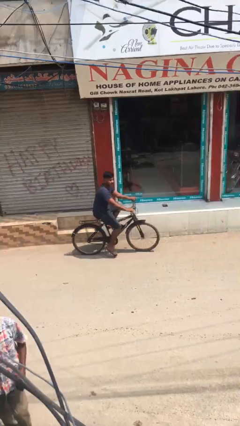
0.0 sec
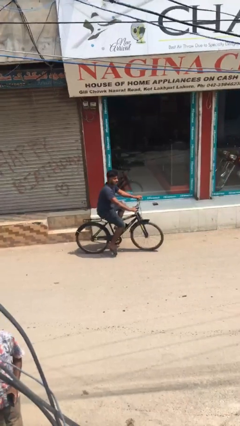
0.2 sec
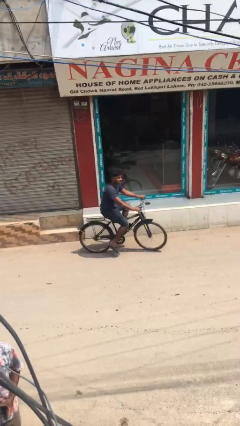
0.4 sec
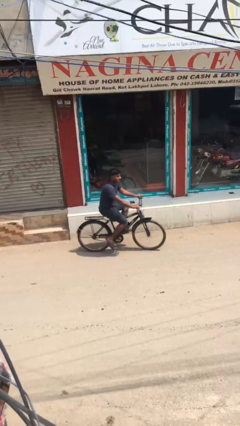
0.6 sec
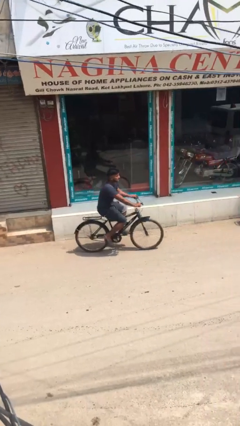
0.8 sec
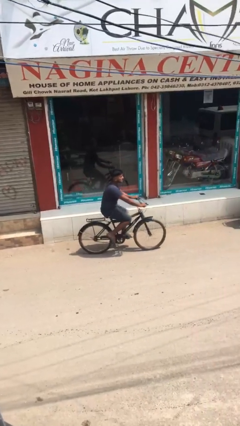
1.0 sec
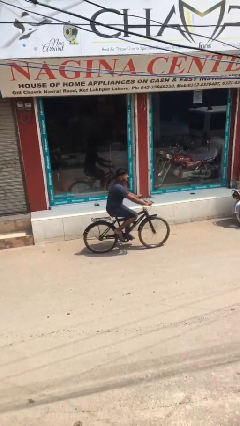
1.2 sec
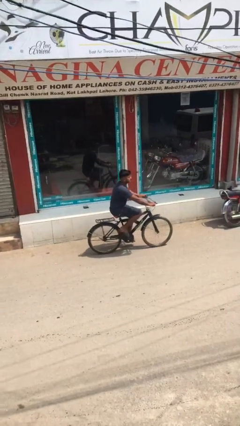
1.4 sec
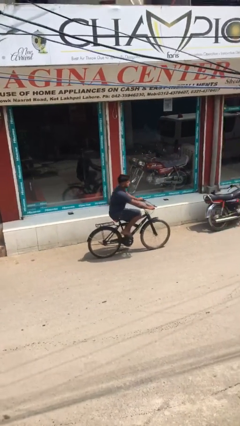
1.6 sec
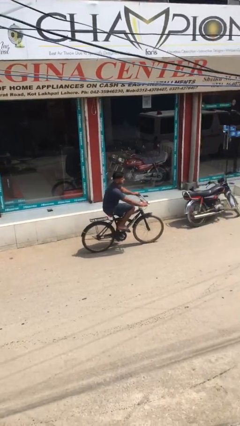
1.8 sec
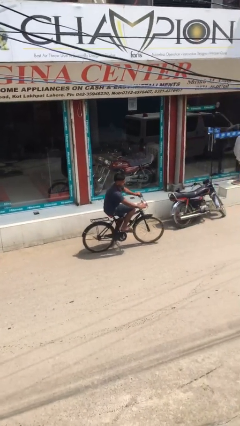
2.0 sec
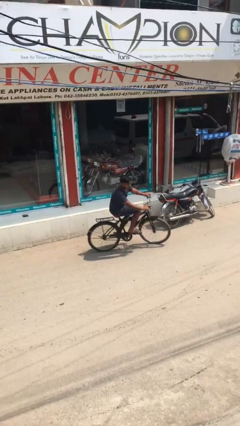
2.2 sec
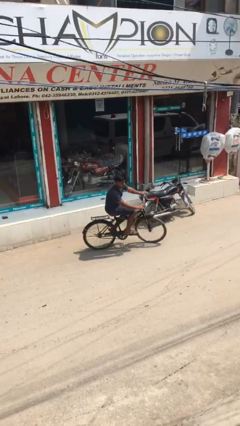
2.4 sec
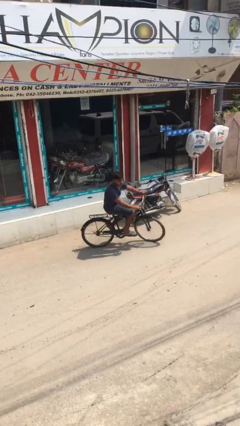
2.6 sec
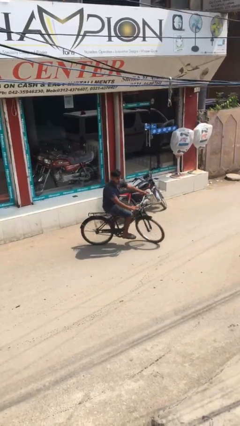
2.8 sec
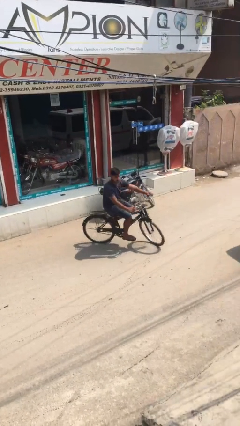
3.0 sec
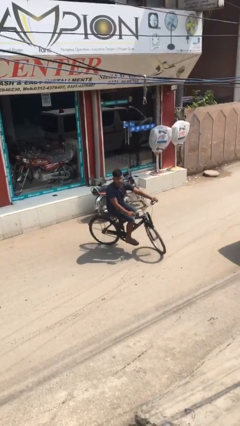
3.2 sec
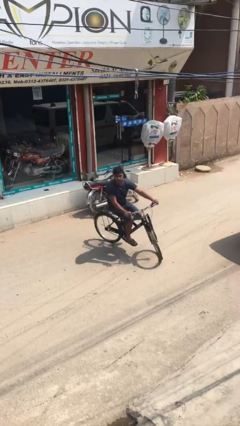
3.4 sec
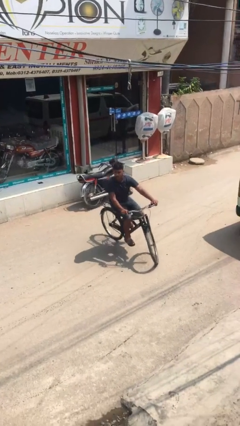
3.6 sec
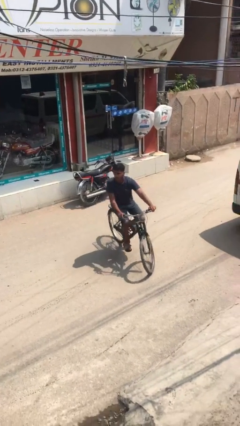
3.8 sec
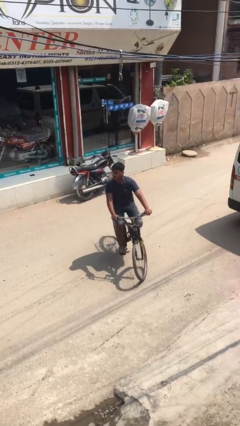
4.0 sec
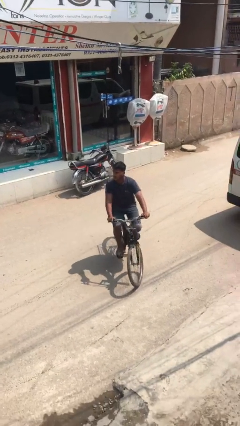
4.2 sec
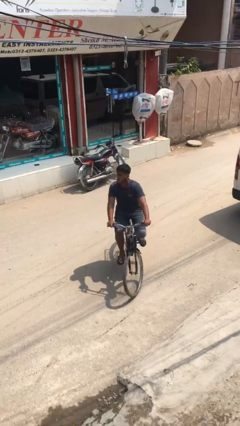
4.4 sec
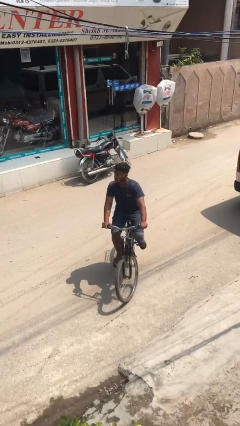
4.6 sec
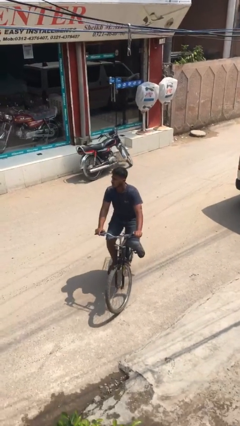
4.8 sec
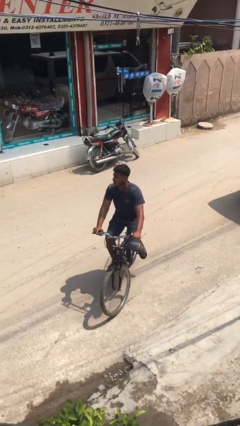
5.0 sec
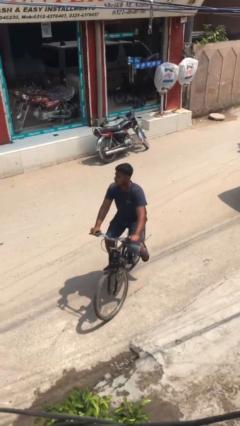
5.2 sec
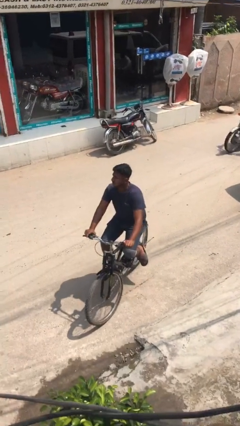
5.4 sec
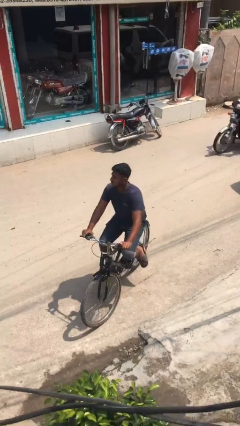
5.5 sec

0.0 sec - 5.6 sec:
person rides bicycle

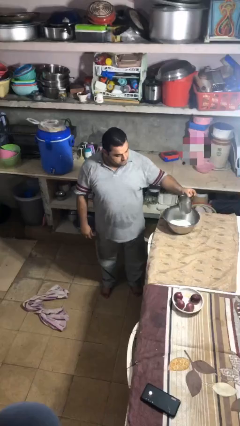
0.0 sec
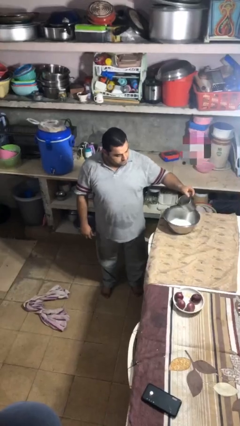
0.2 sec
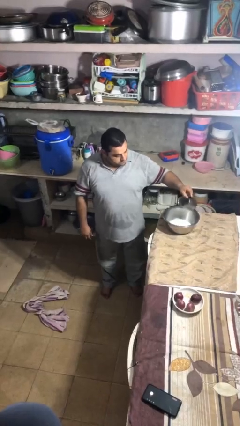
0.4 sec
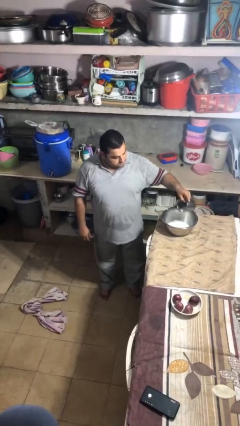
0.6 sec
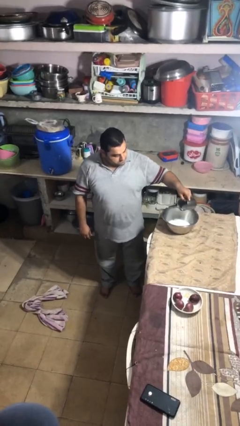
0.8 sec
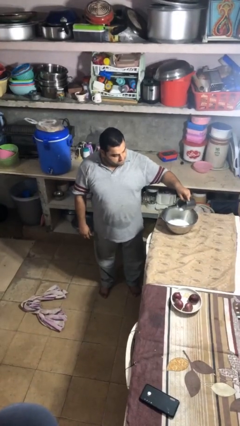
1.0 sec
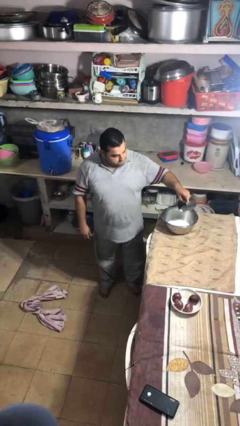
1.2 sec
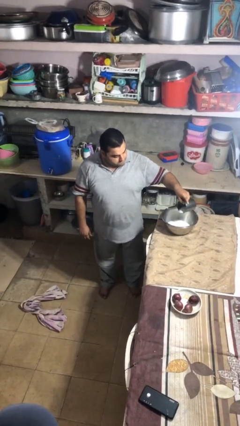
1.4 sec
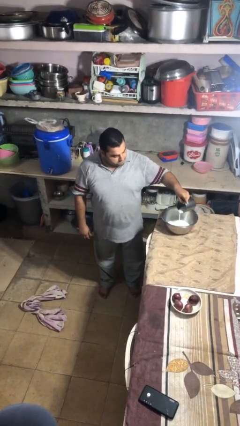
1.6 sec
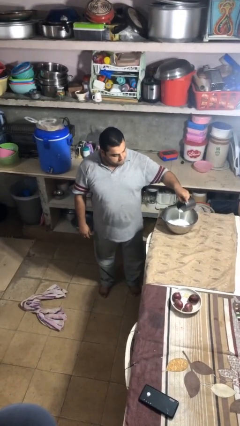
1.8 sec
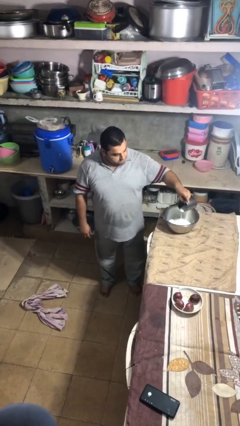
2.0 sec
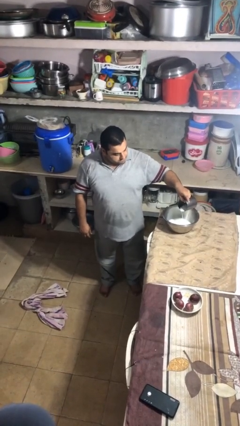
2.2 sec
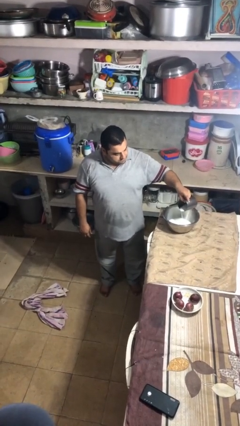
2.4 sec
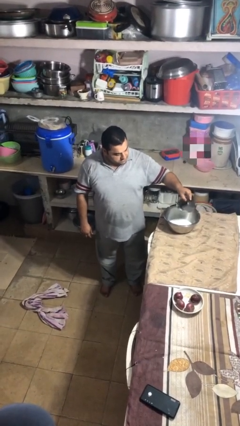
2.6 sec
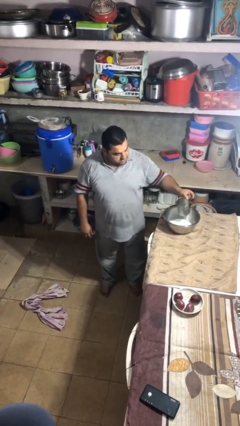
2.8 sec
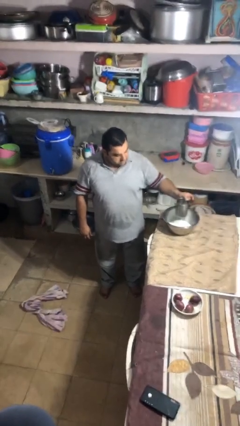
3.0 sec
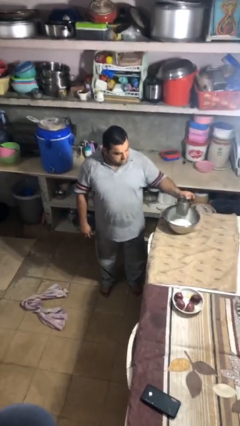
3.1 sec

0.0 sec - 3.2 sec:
person pours into bowl

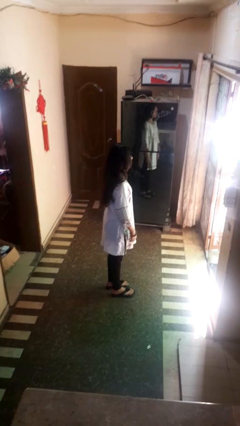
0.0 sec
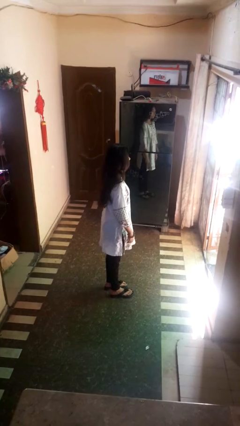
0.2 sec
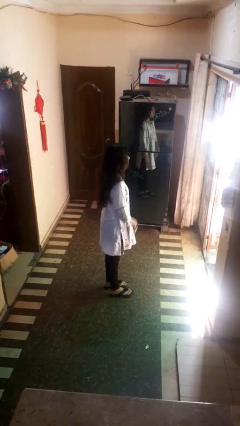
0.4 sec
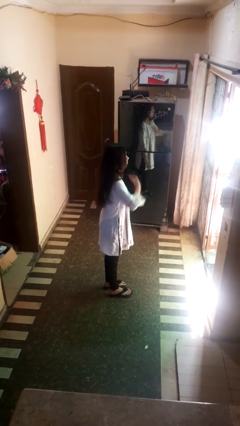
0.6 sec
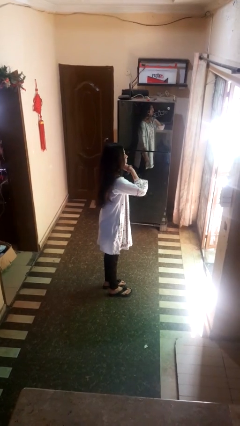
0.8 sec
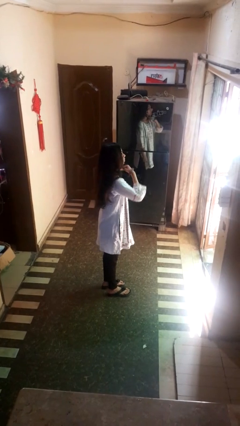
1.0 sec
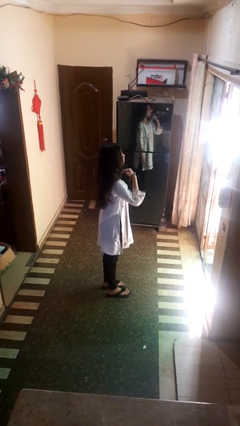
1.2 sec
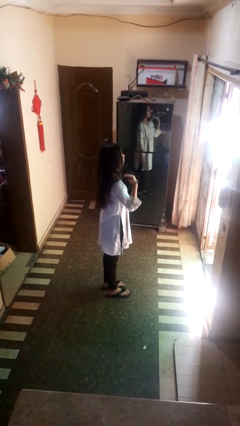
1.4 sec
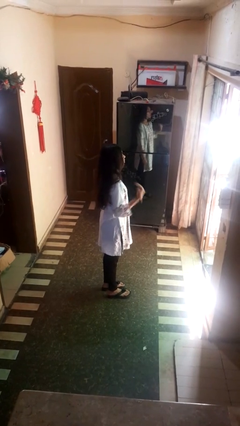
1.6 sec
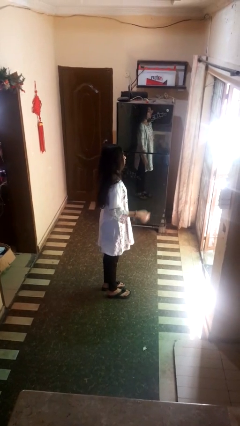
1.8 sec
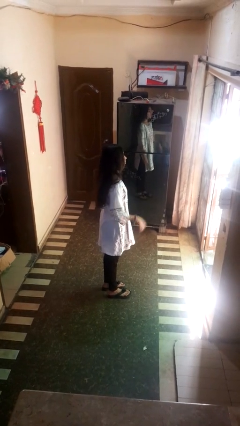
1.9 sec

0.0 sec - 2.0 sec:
person gestures cut

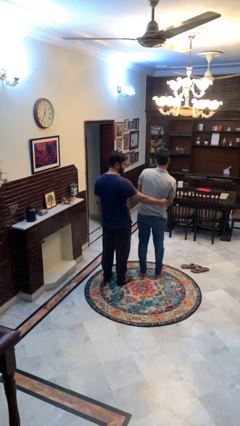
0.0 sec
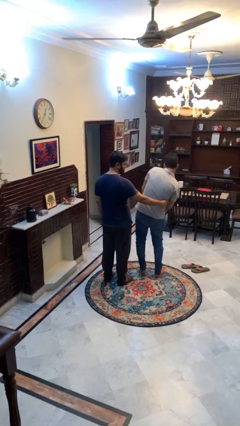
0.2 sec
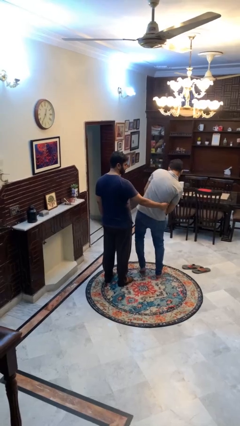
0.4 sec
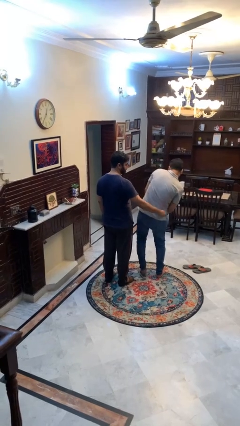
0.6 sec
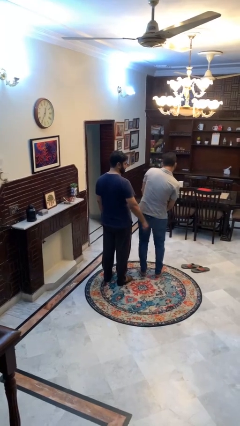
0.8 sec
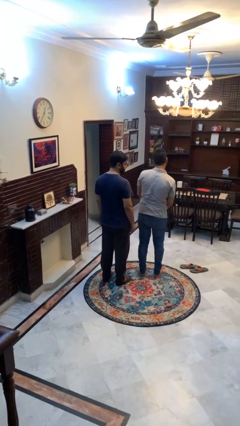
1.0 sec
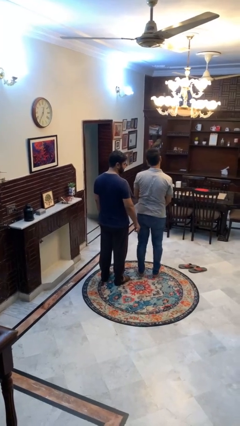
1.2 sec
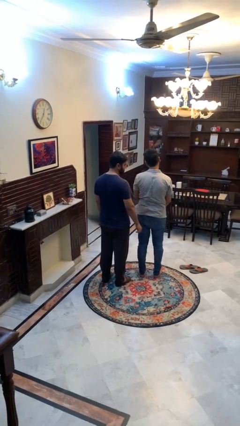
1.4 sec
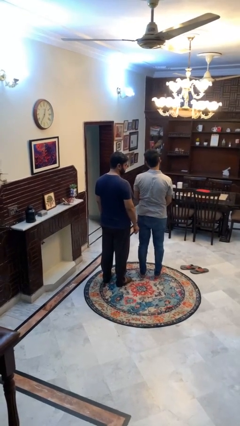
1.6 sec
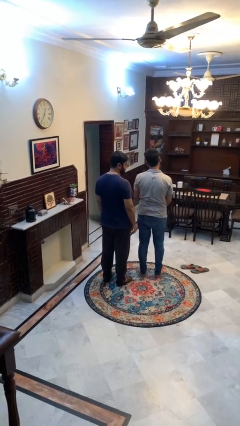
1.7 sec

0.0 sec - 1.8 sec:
person tickles person

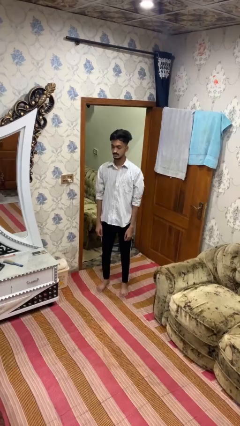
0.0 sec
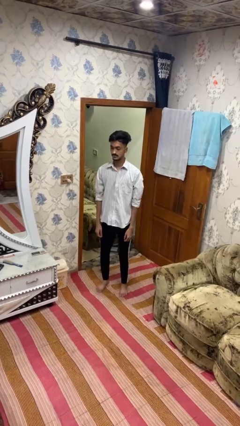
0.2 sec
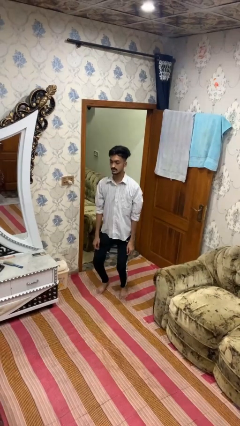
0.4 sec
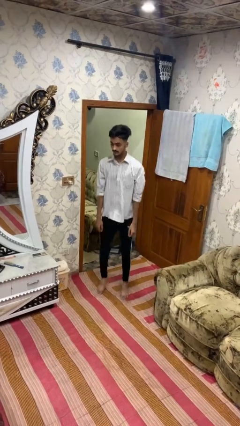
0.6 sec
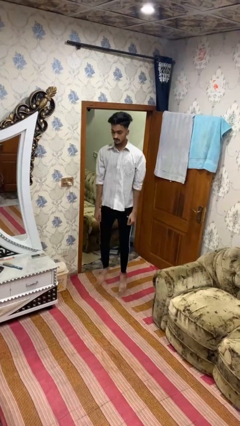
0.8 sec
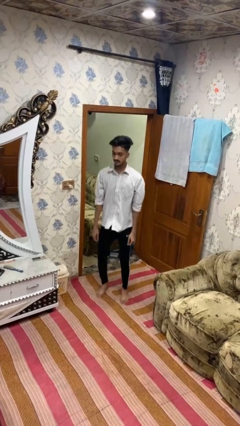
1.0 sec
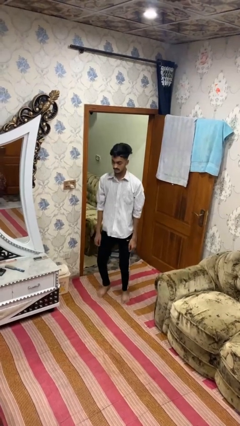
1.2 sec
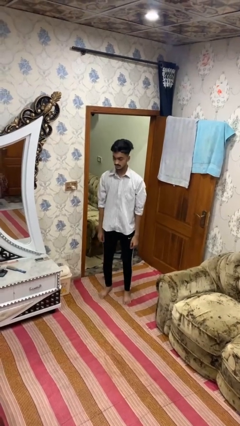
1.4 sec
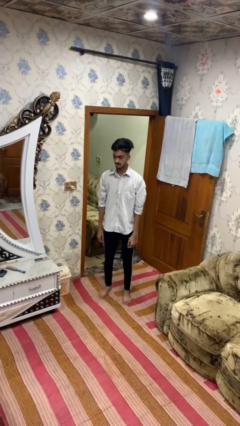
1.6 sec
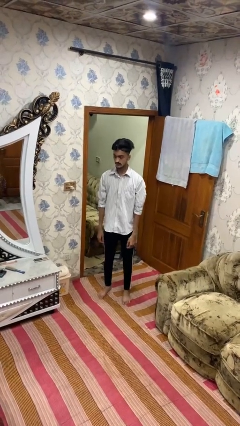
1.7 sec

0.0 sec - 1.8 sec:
person jumps

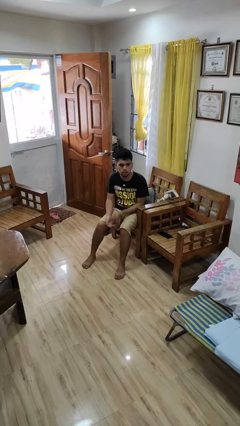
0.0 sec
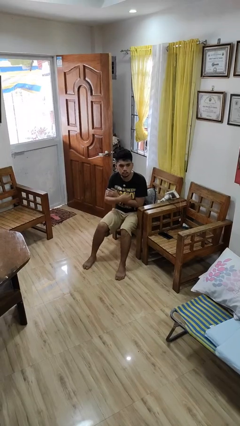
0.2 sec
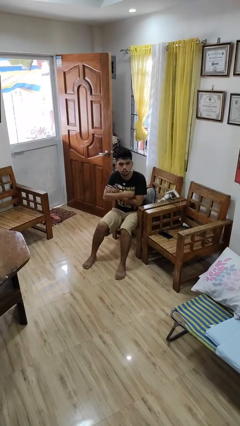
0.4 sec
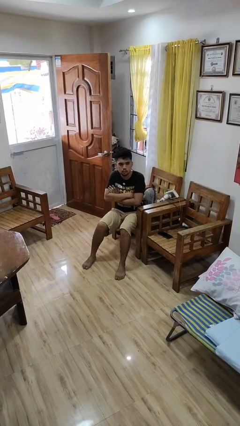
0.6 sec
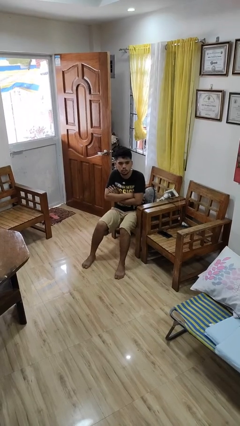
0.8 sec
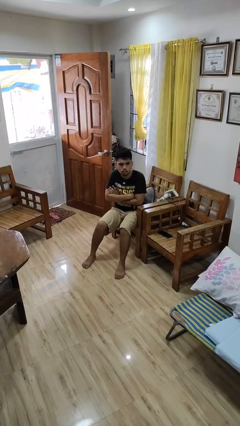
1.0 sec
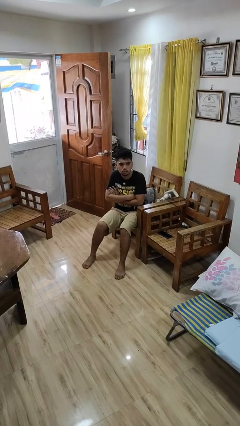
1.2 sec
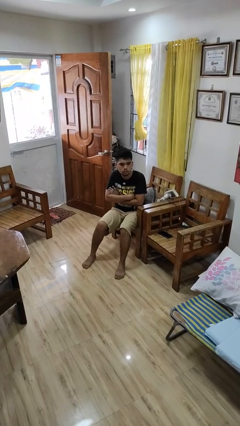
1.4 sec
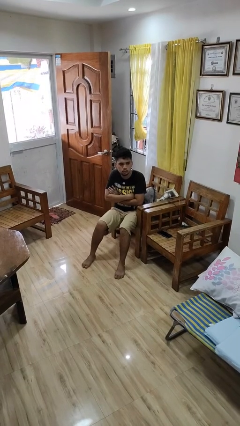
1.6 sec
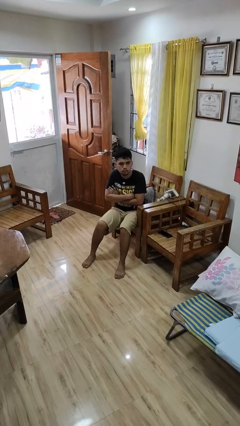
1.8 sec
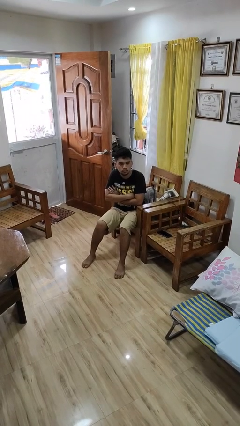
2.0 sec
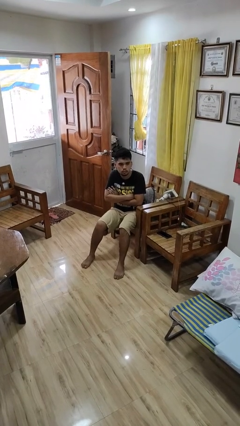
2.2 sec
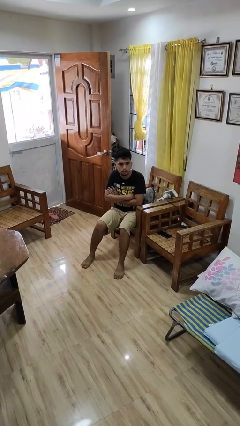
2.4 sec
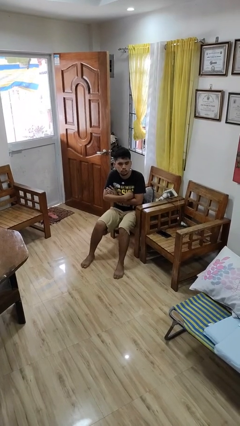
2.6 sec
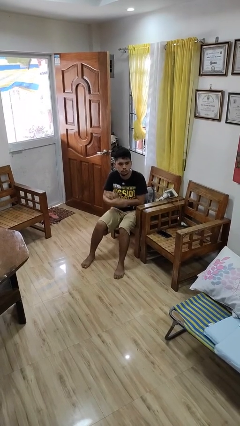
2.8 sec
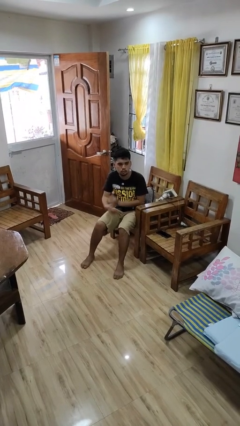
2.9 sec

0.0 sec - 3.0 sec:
person crosses arms

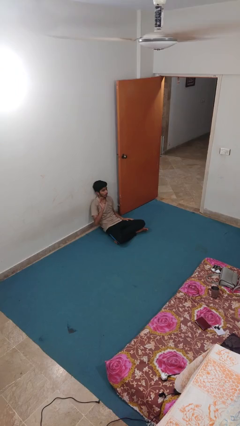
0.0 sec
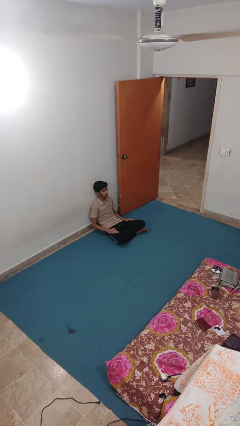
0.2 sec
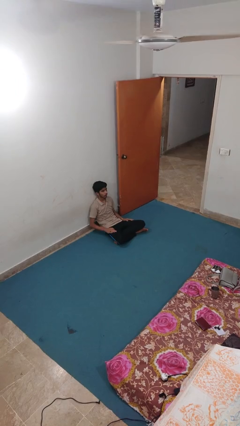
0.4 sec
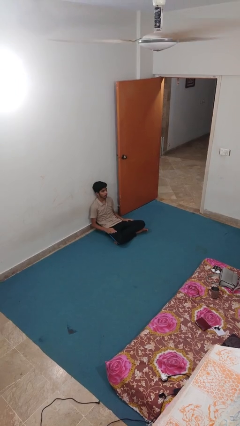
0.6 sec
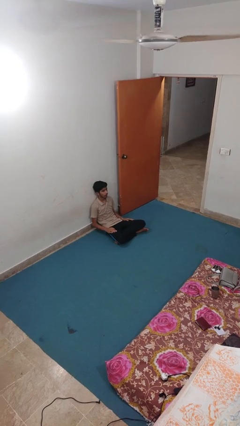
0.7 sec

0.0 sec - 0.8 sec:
person slaps hands on thighs
